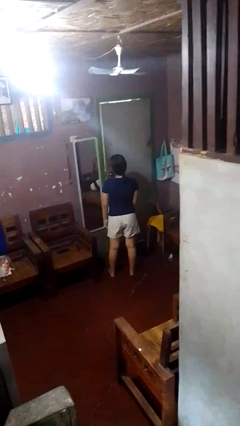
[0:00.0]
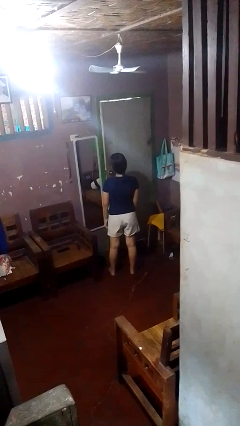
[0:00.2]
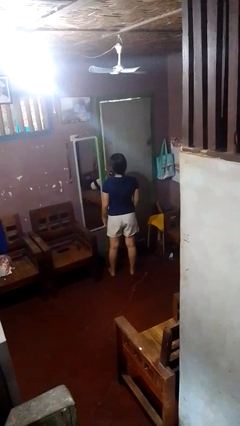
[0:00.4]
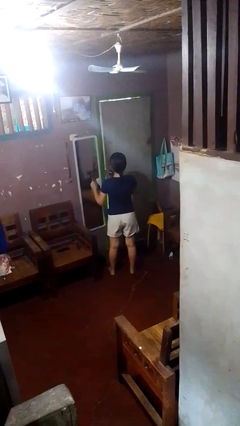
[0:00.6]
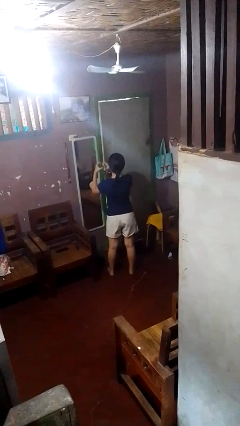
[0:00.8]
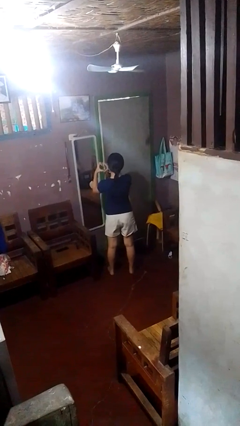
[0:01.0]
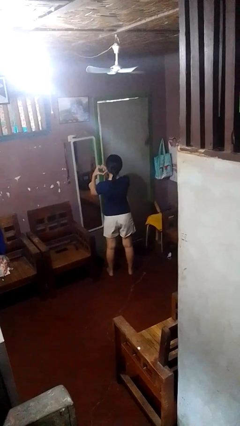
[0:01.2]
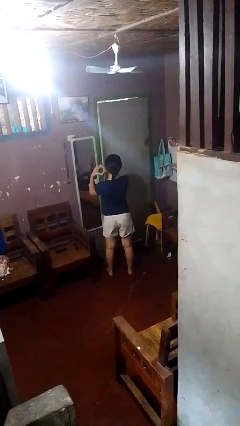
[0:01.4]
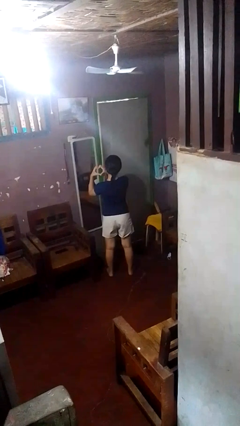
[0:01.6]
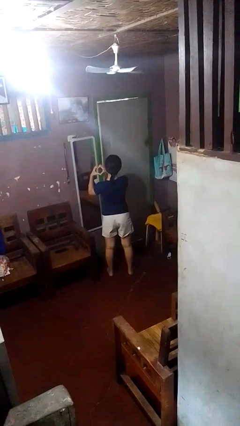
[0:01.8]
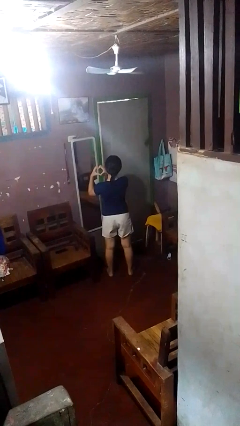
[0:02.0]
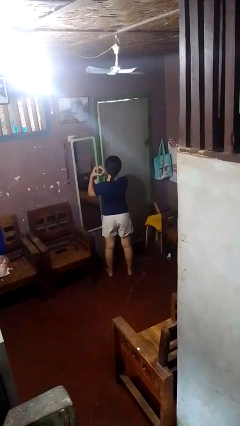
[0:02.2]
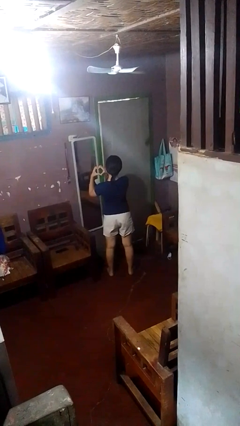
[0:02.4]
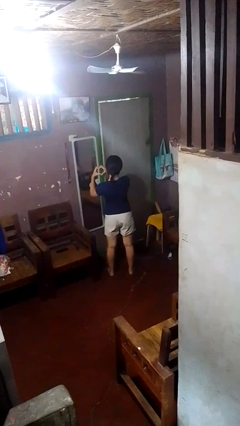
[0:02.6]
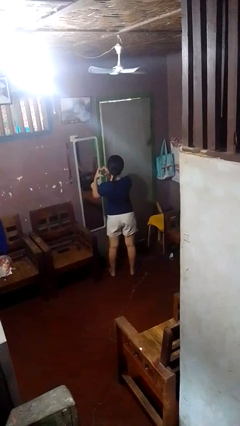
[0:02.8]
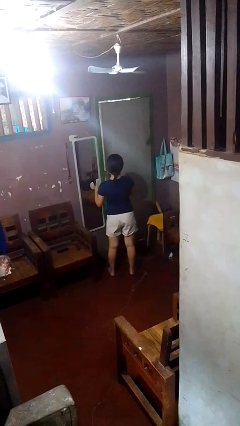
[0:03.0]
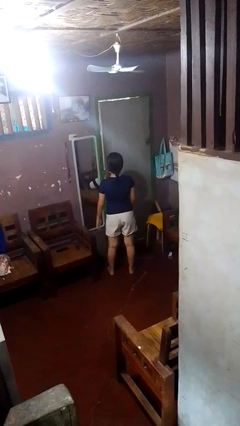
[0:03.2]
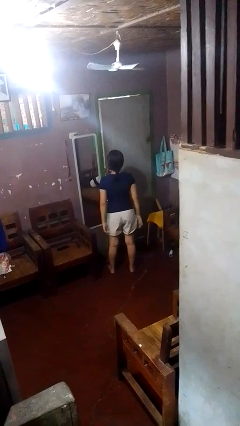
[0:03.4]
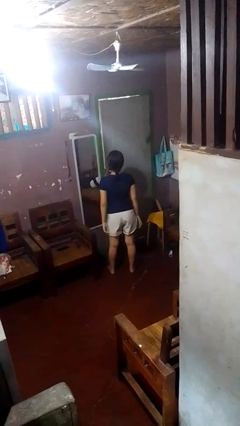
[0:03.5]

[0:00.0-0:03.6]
person gestures heart

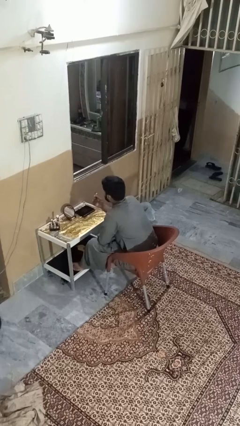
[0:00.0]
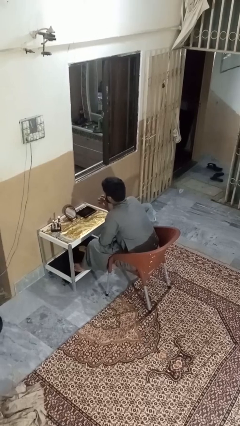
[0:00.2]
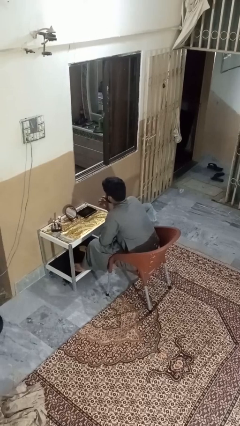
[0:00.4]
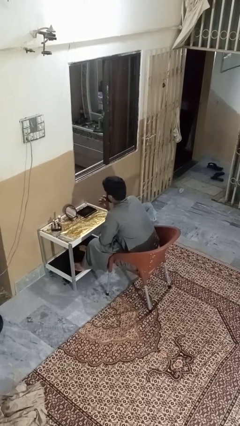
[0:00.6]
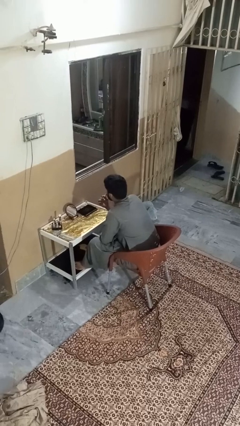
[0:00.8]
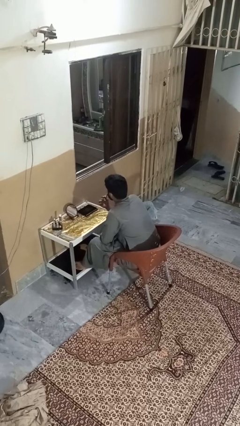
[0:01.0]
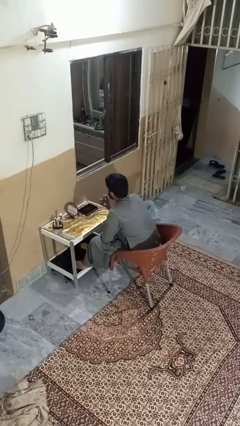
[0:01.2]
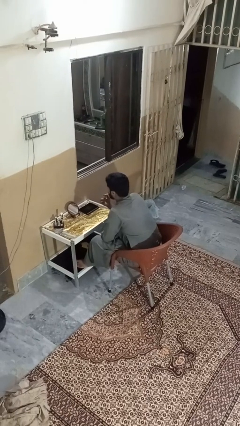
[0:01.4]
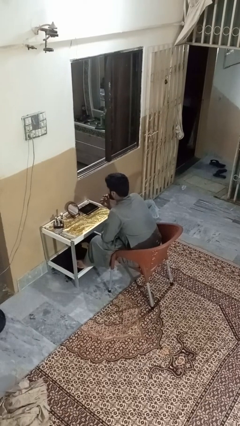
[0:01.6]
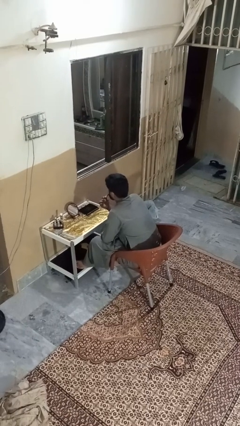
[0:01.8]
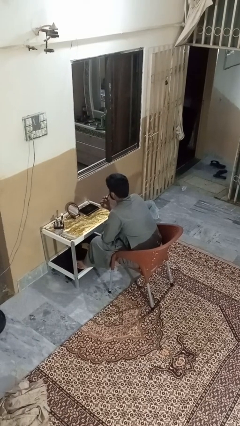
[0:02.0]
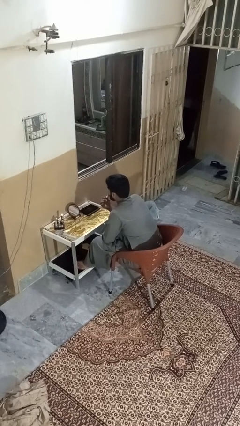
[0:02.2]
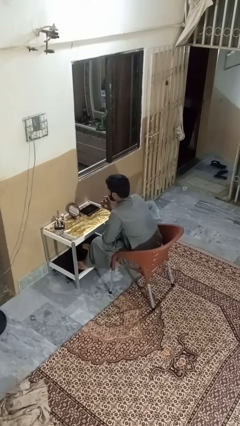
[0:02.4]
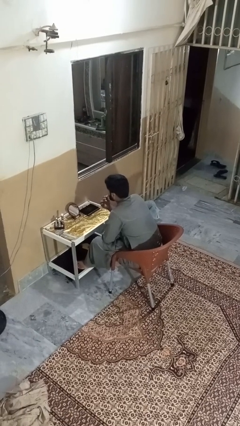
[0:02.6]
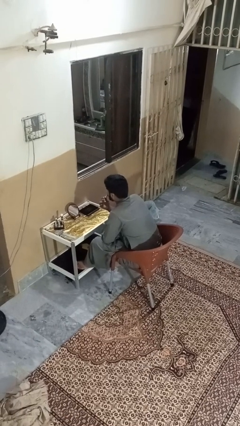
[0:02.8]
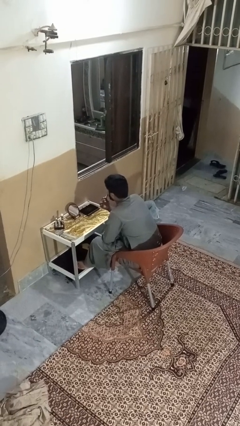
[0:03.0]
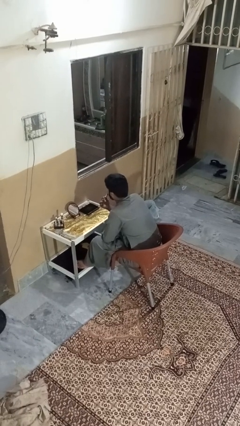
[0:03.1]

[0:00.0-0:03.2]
person applies lip makeup

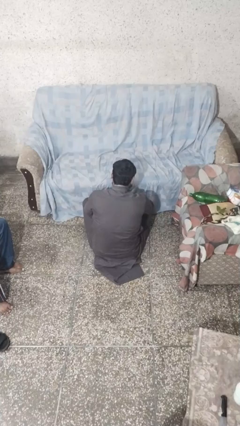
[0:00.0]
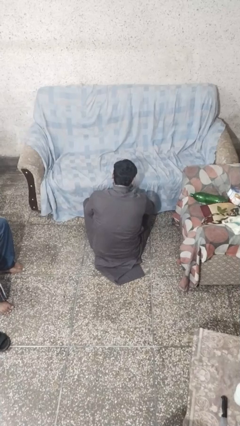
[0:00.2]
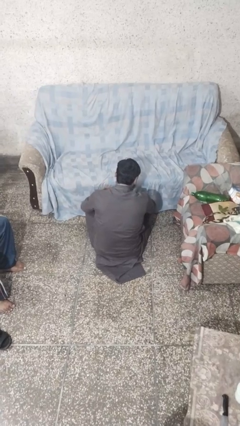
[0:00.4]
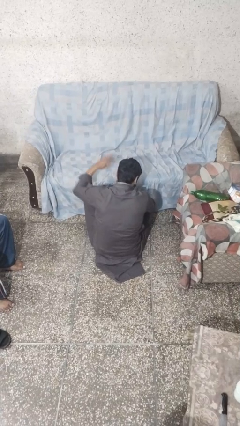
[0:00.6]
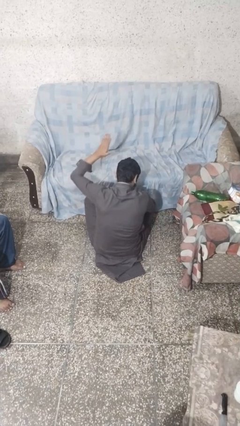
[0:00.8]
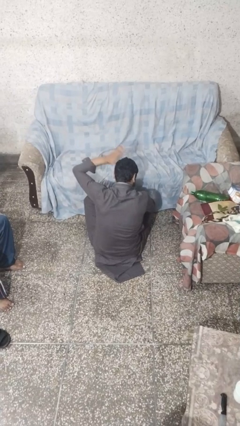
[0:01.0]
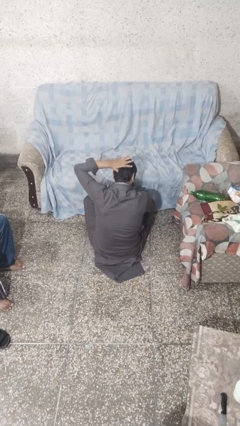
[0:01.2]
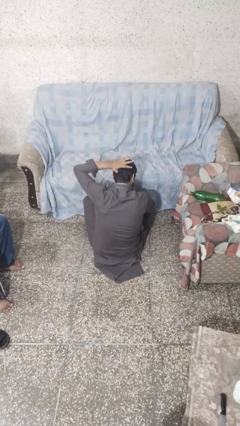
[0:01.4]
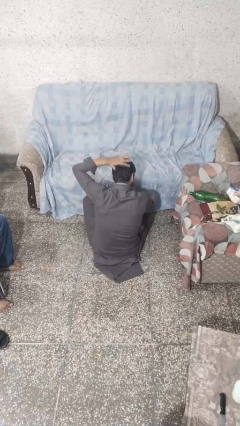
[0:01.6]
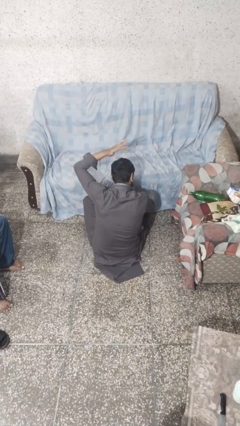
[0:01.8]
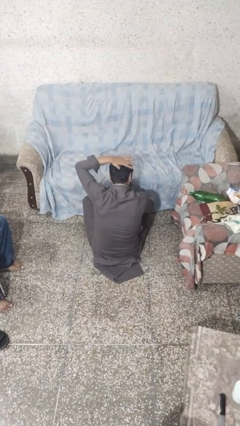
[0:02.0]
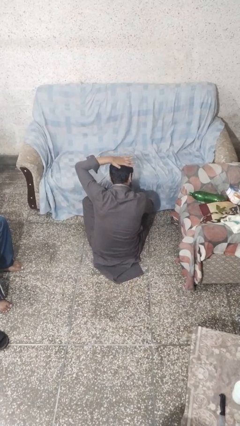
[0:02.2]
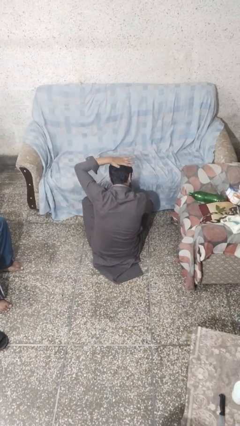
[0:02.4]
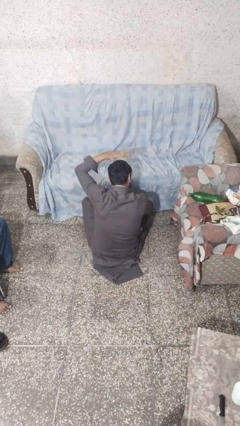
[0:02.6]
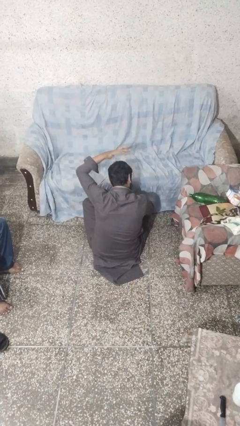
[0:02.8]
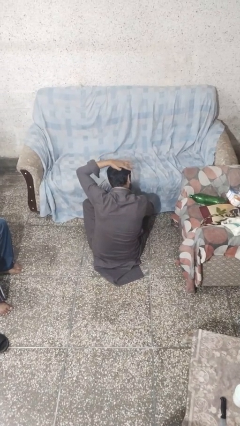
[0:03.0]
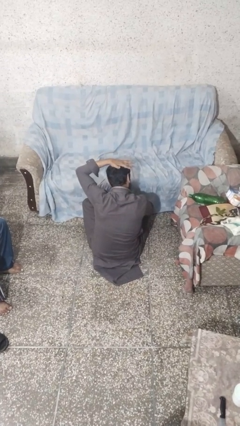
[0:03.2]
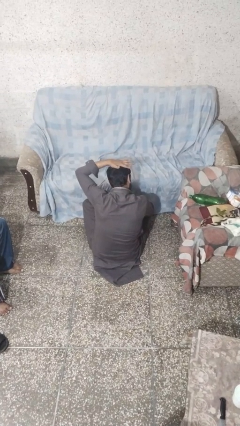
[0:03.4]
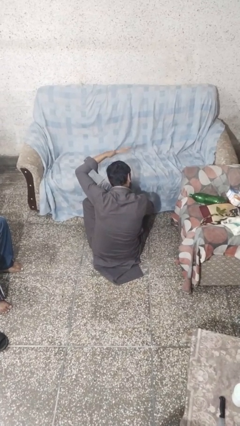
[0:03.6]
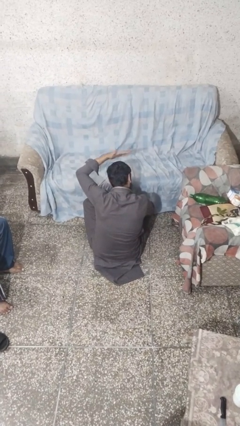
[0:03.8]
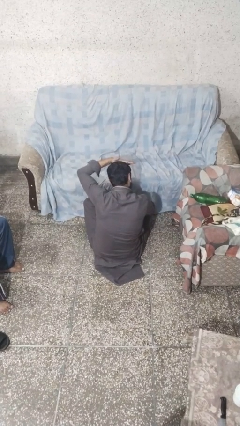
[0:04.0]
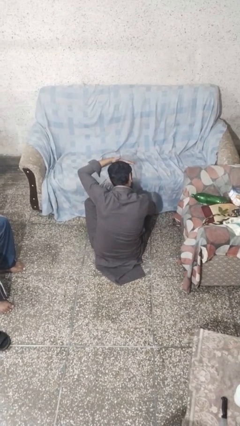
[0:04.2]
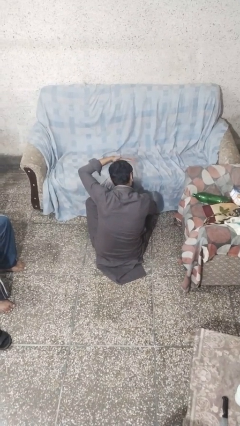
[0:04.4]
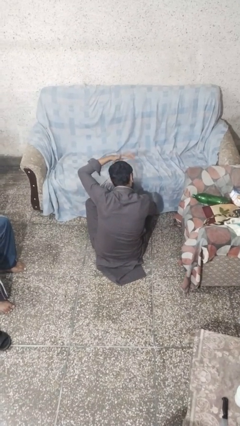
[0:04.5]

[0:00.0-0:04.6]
person pats head

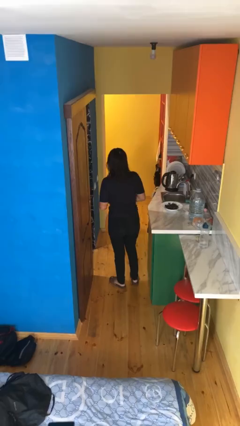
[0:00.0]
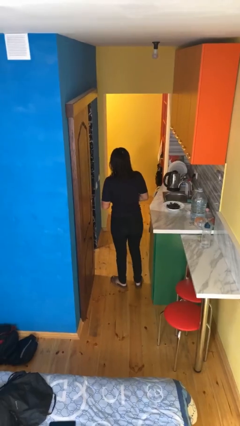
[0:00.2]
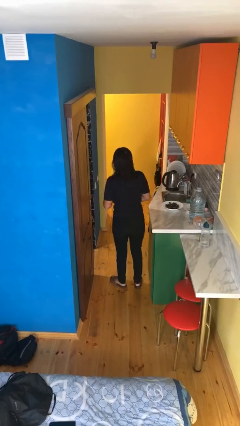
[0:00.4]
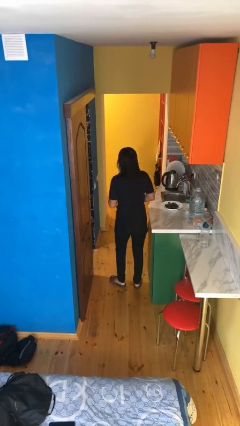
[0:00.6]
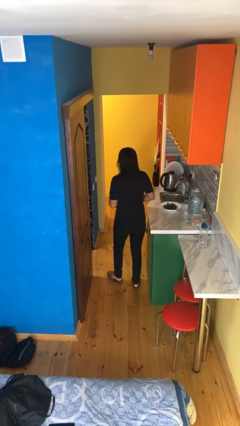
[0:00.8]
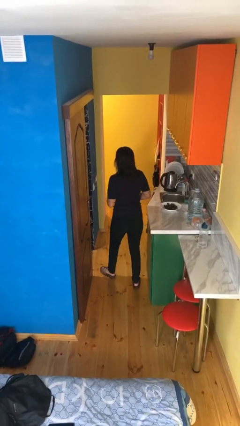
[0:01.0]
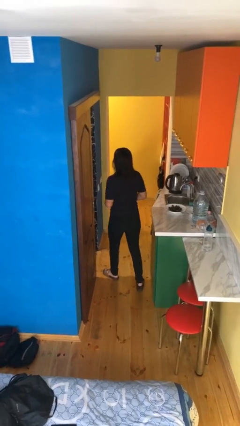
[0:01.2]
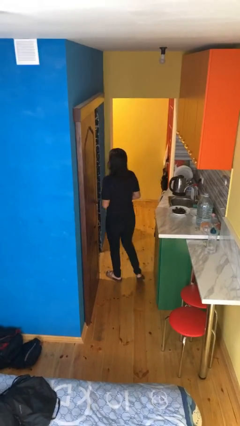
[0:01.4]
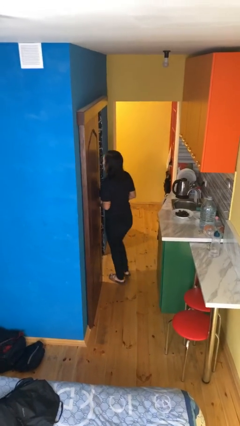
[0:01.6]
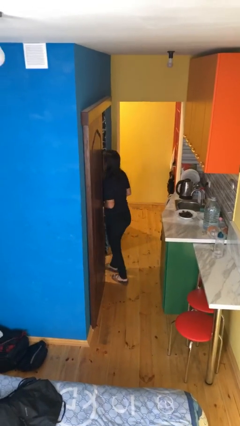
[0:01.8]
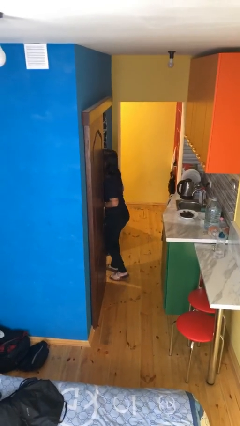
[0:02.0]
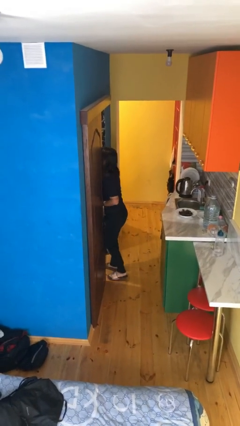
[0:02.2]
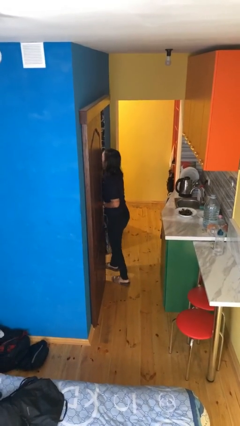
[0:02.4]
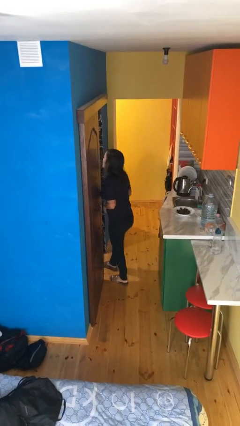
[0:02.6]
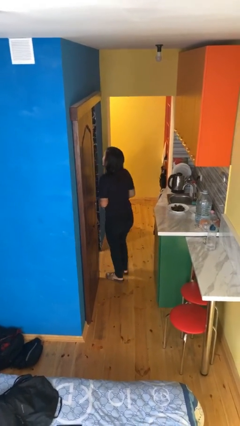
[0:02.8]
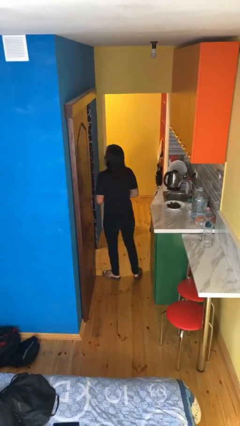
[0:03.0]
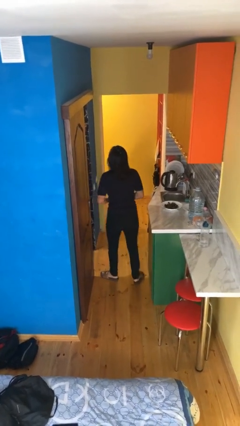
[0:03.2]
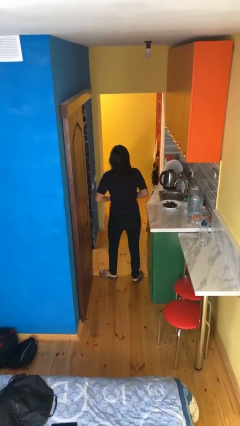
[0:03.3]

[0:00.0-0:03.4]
person bumps into wall

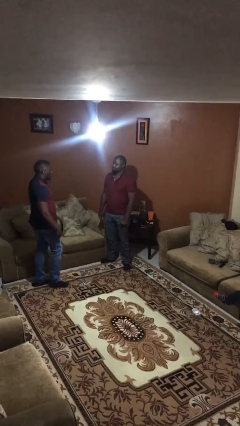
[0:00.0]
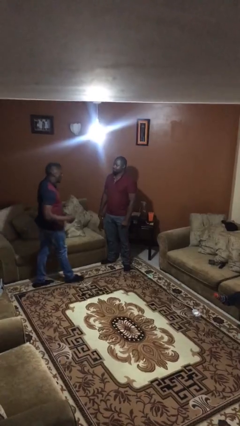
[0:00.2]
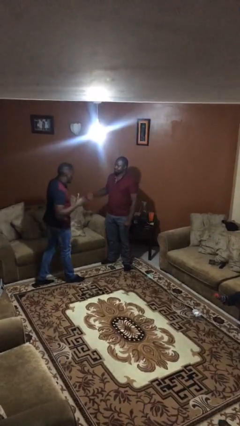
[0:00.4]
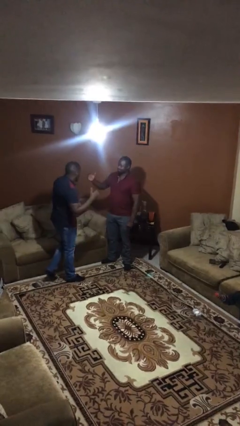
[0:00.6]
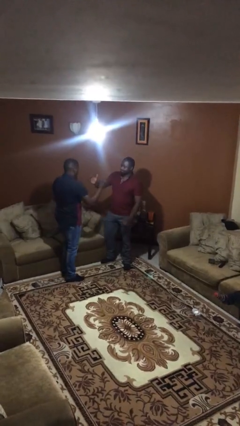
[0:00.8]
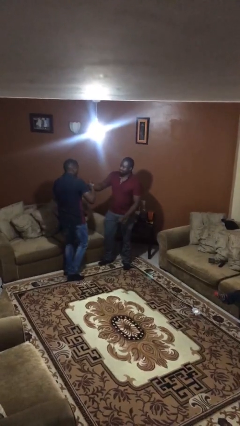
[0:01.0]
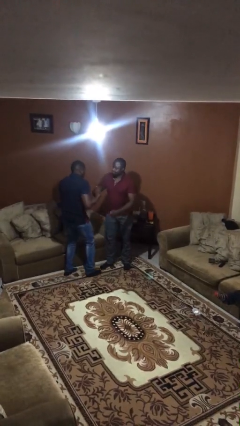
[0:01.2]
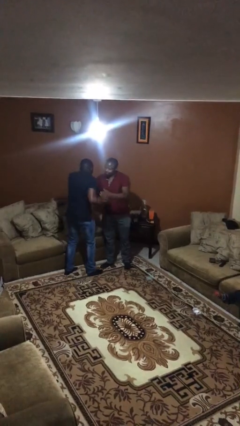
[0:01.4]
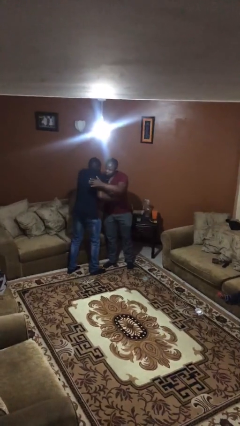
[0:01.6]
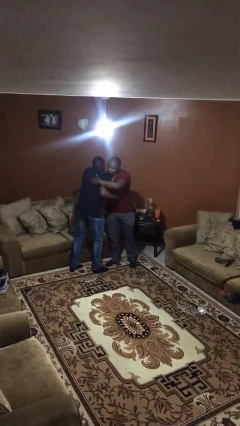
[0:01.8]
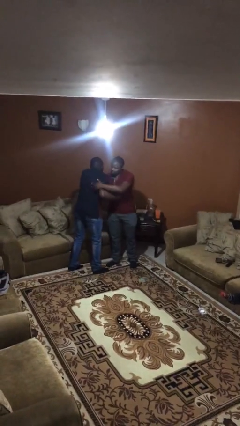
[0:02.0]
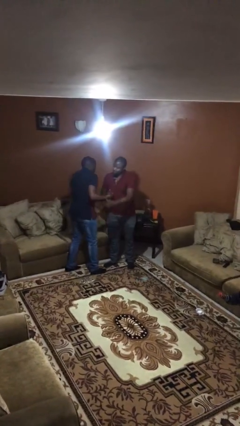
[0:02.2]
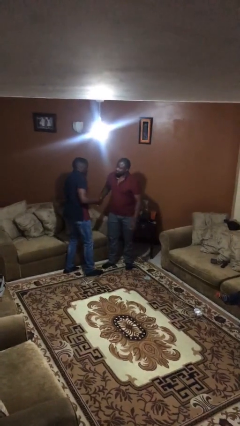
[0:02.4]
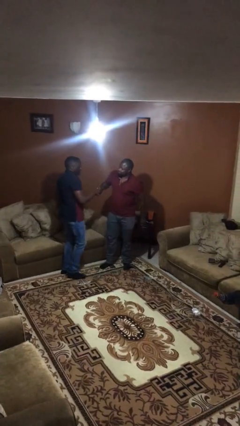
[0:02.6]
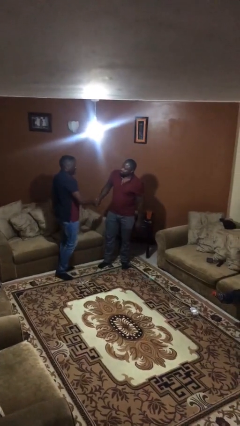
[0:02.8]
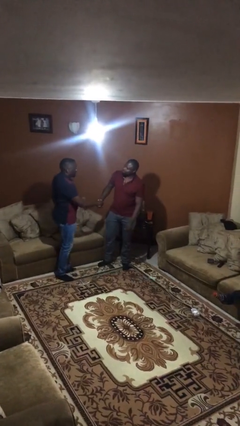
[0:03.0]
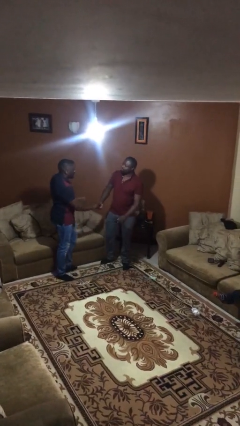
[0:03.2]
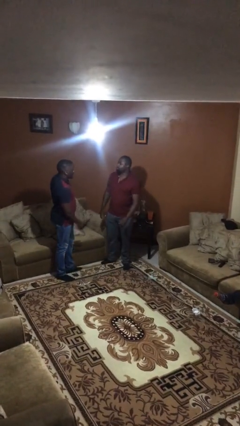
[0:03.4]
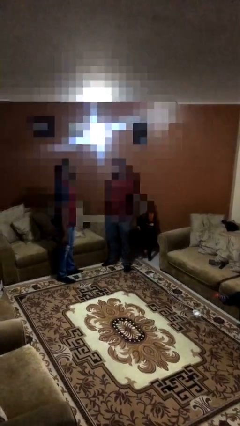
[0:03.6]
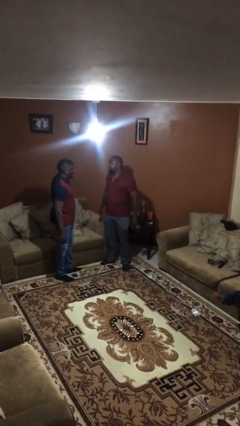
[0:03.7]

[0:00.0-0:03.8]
person embraces person
